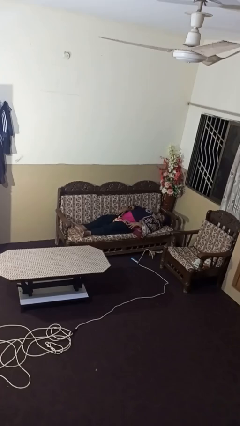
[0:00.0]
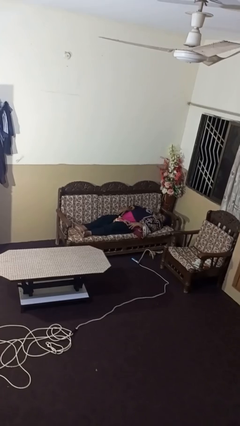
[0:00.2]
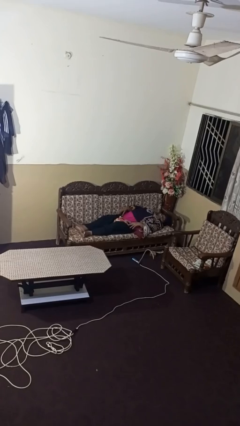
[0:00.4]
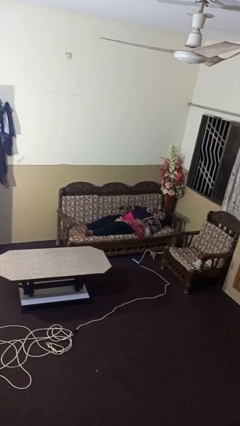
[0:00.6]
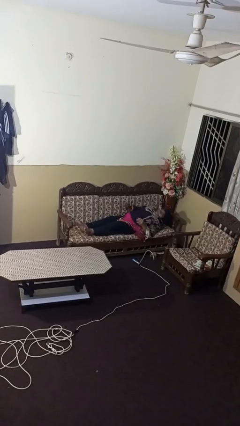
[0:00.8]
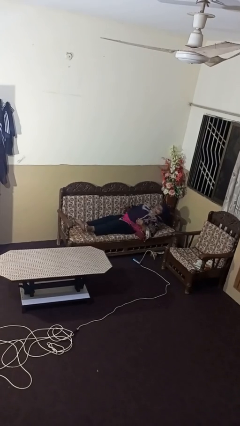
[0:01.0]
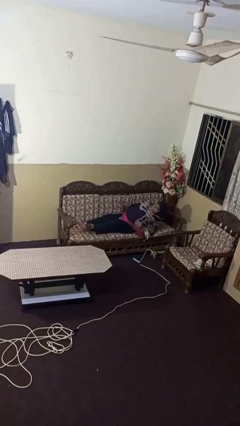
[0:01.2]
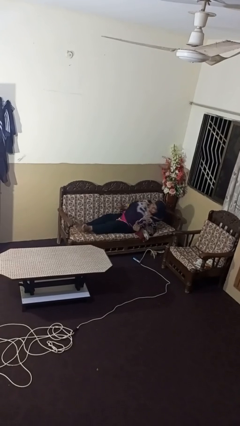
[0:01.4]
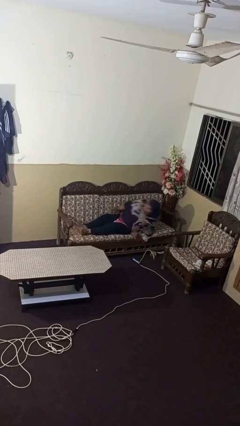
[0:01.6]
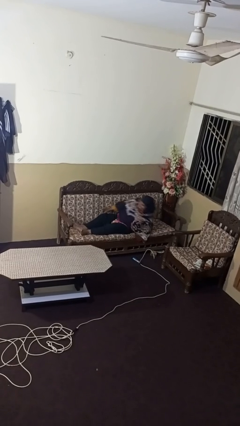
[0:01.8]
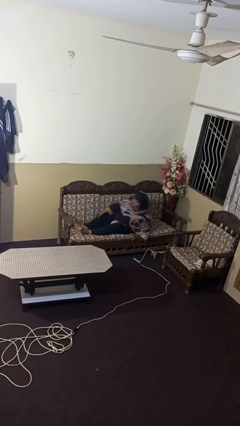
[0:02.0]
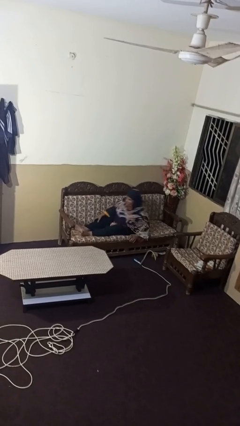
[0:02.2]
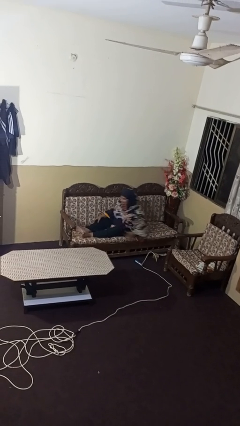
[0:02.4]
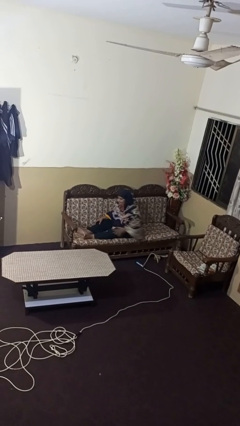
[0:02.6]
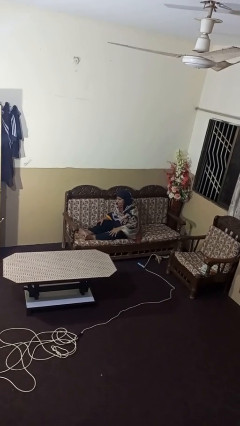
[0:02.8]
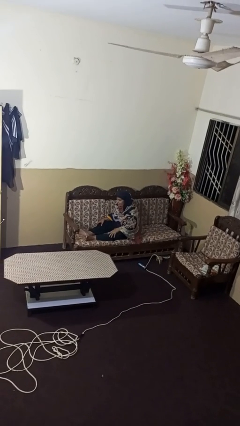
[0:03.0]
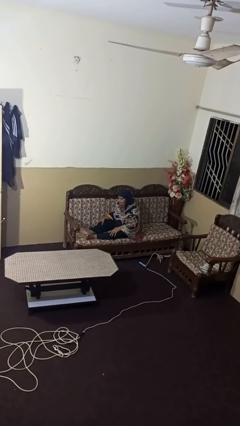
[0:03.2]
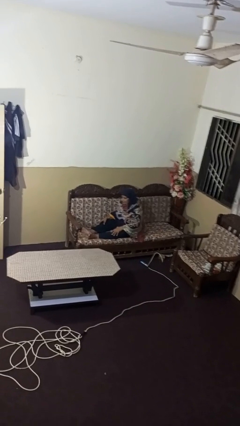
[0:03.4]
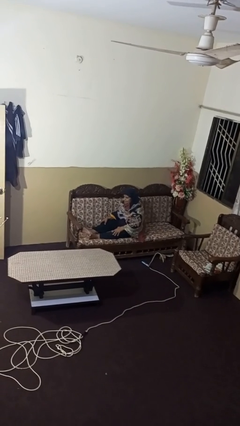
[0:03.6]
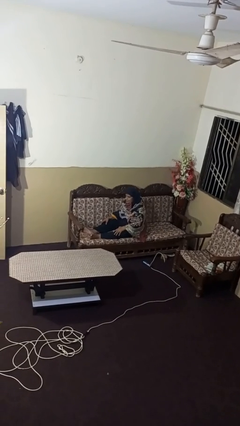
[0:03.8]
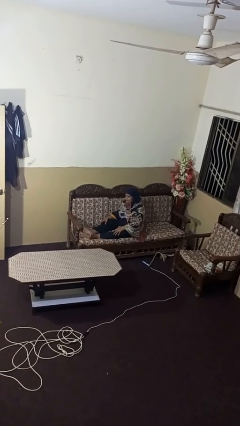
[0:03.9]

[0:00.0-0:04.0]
person stands up

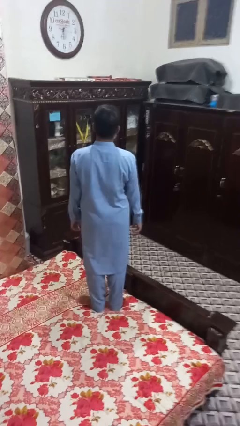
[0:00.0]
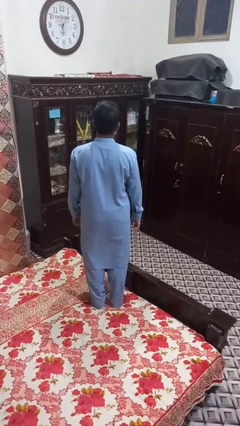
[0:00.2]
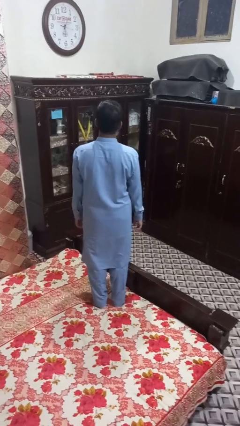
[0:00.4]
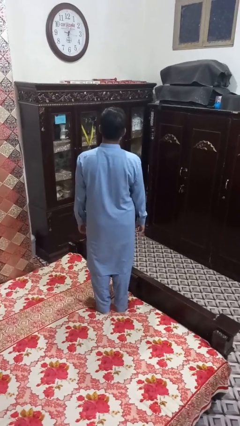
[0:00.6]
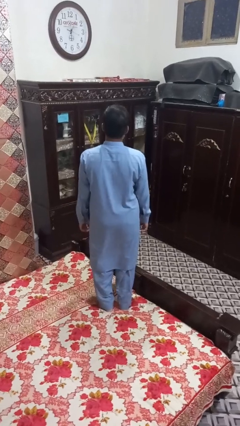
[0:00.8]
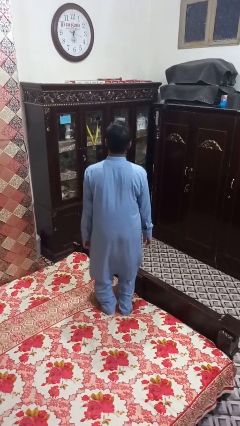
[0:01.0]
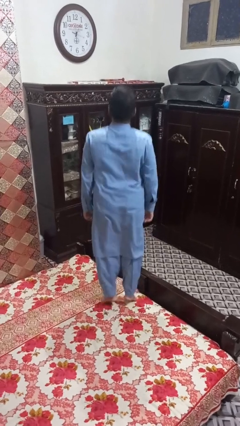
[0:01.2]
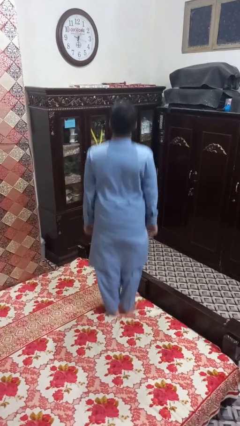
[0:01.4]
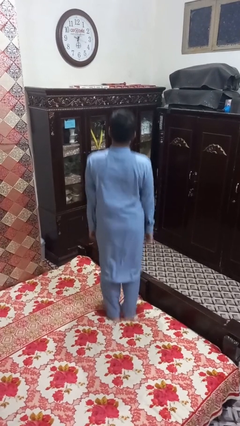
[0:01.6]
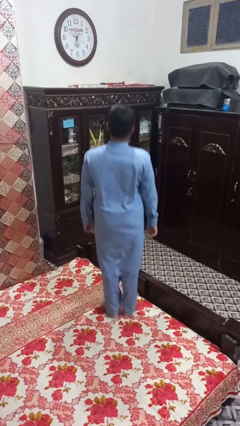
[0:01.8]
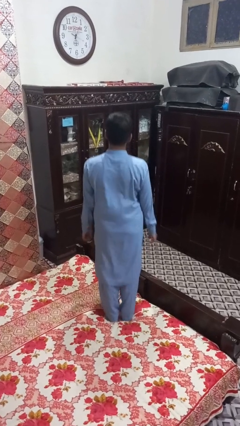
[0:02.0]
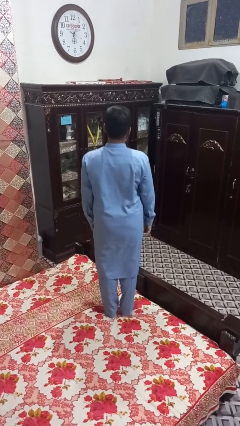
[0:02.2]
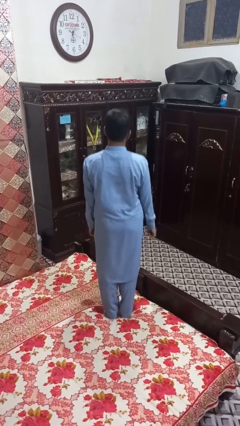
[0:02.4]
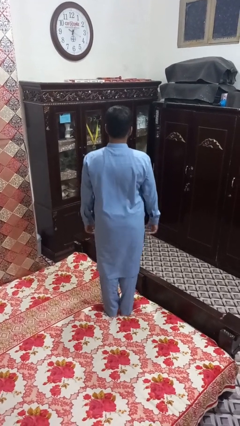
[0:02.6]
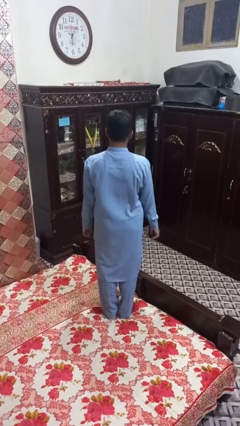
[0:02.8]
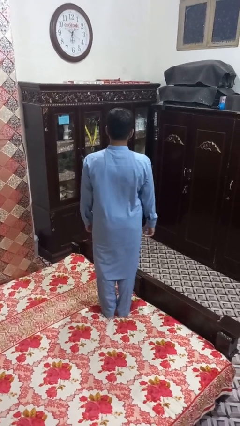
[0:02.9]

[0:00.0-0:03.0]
person jumps on bed

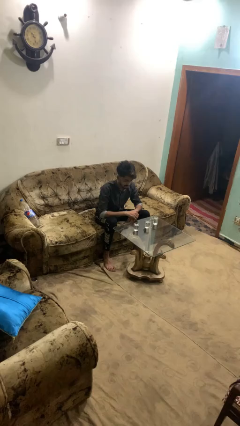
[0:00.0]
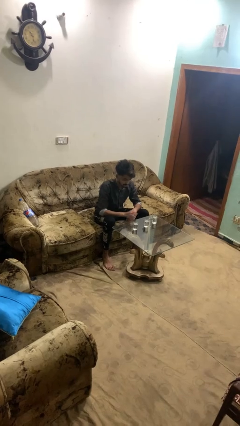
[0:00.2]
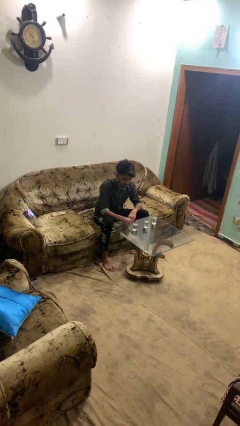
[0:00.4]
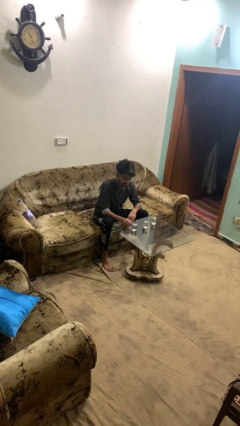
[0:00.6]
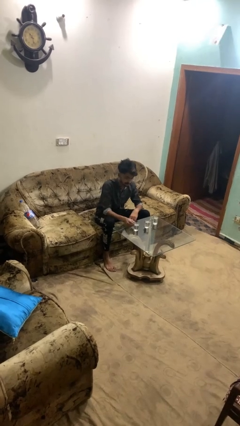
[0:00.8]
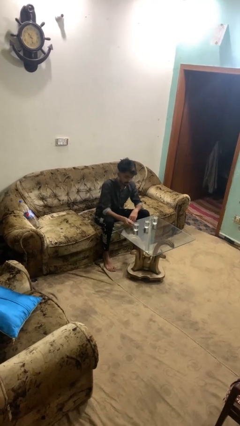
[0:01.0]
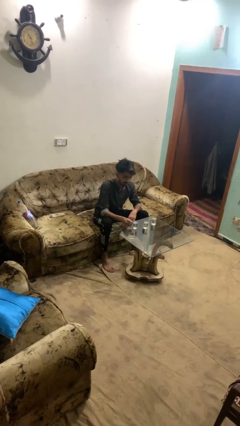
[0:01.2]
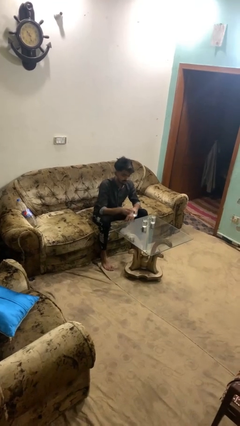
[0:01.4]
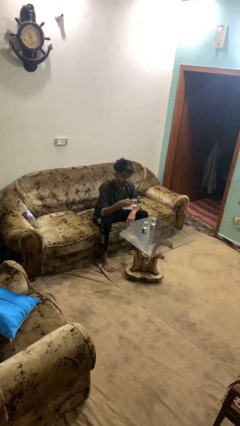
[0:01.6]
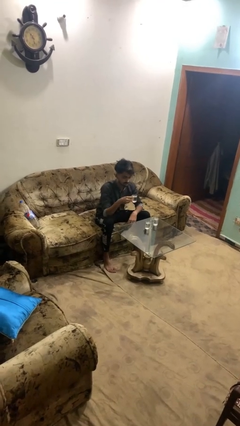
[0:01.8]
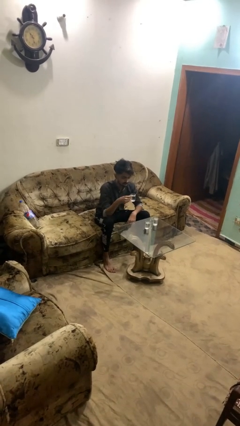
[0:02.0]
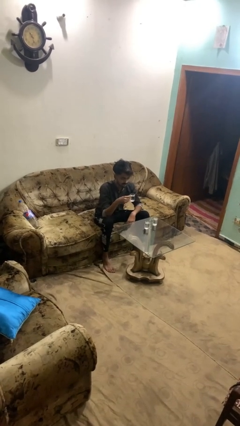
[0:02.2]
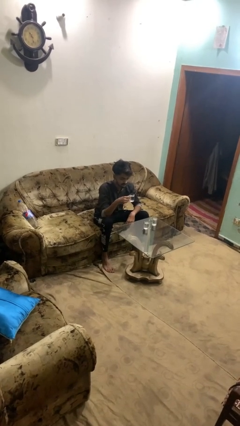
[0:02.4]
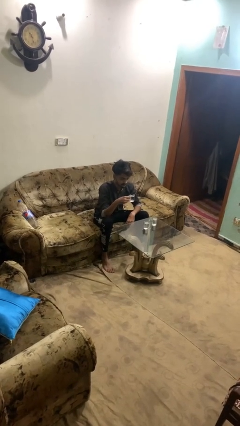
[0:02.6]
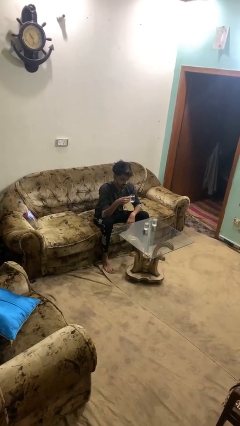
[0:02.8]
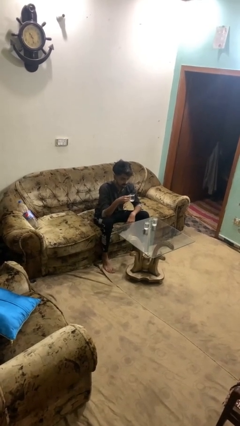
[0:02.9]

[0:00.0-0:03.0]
person picks up object from table

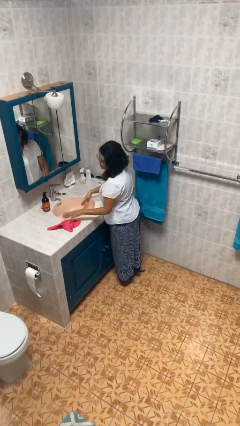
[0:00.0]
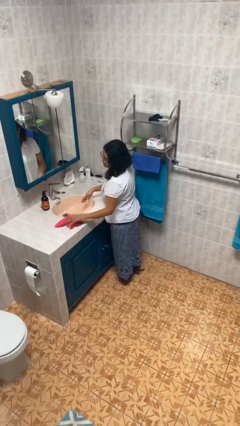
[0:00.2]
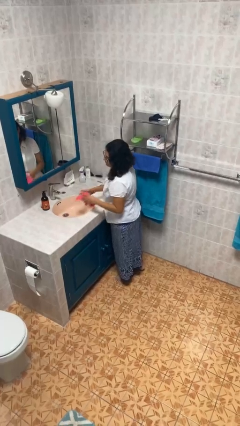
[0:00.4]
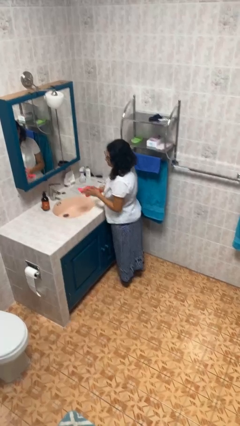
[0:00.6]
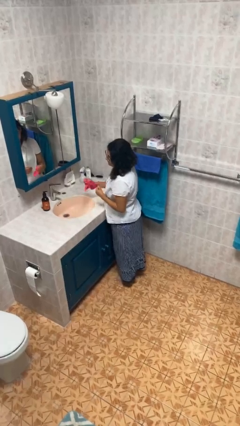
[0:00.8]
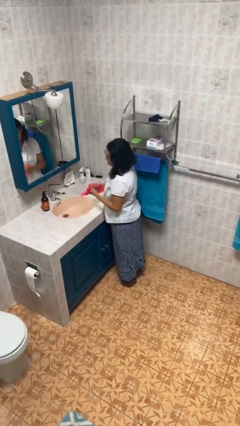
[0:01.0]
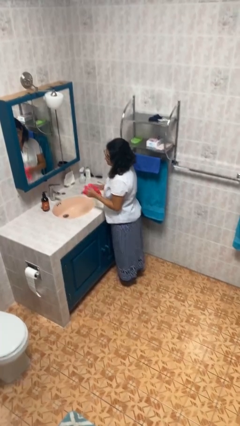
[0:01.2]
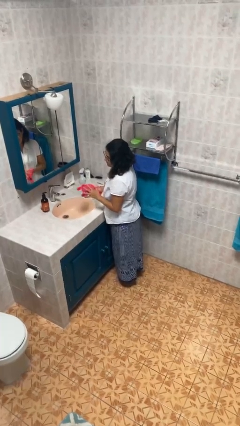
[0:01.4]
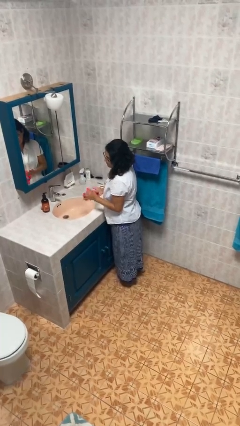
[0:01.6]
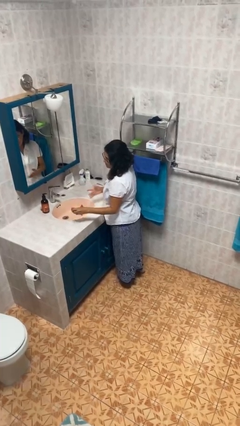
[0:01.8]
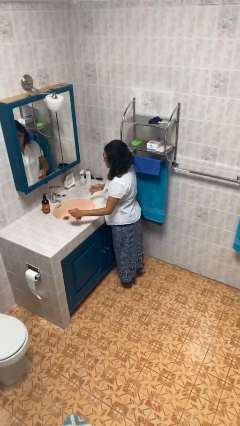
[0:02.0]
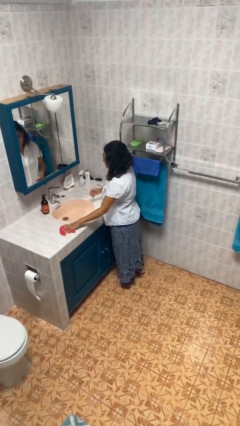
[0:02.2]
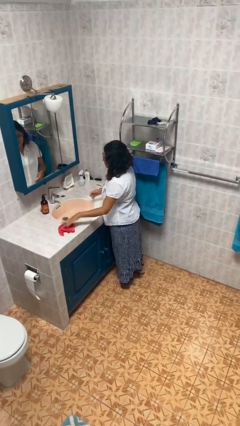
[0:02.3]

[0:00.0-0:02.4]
person dries hands with towel

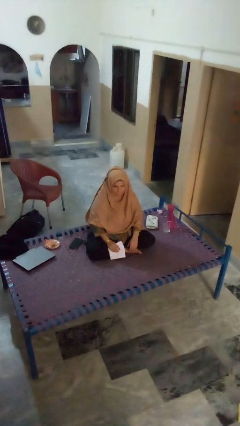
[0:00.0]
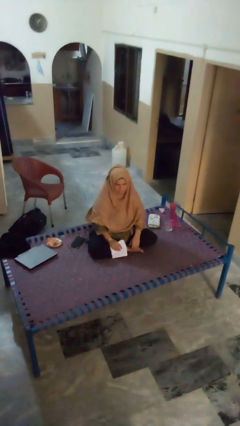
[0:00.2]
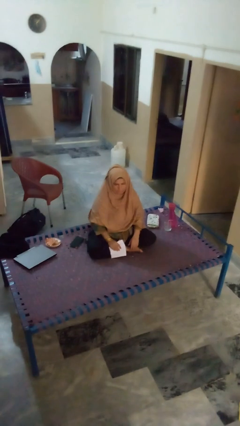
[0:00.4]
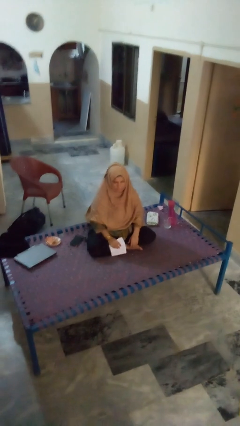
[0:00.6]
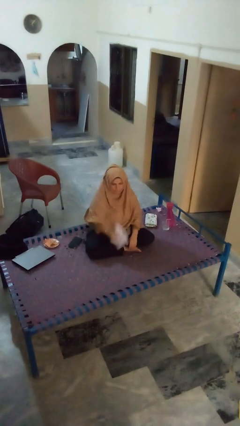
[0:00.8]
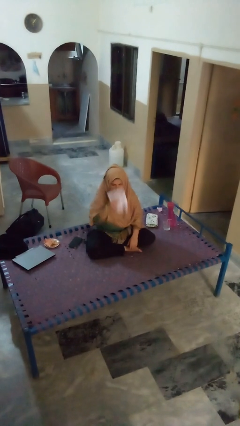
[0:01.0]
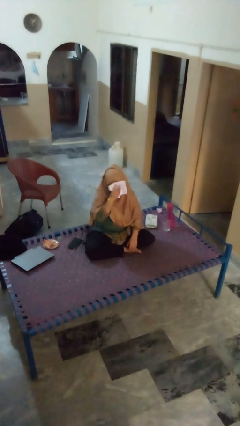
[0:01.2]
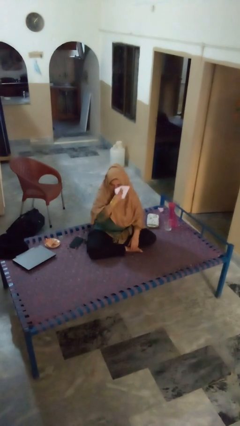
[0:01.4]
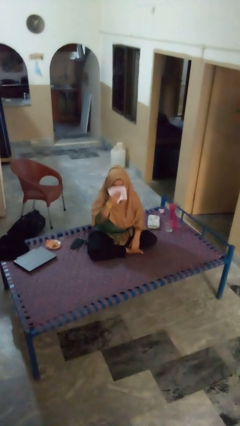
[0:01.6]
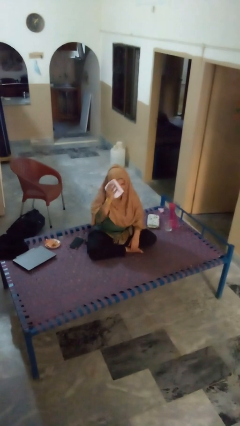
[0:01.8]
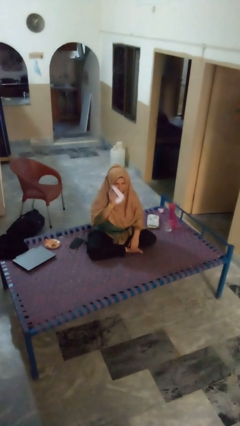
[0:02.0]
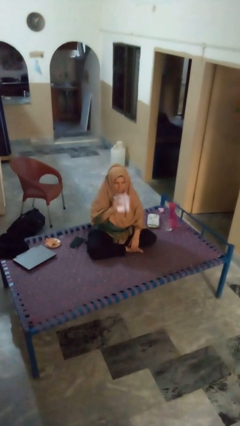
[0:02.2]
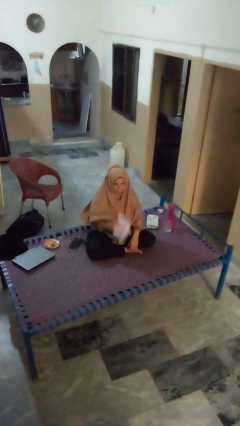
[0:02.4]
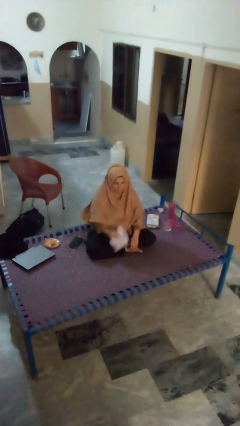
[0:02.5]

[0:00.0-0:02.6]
person wipes mouth with napkin

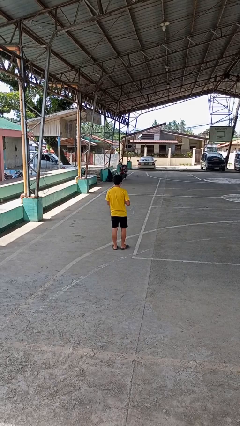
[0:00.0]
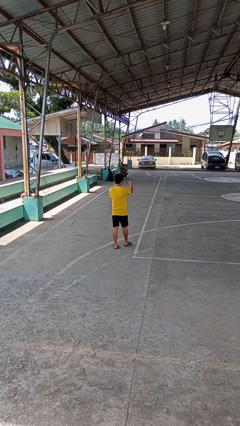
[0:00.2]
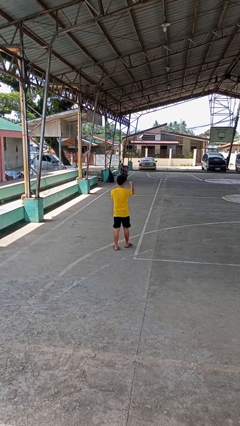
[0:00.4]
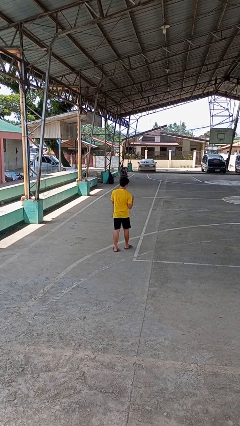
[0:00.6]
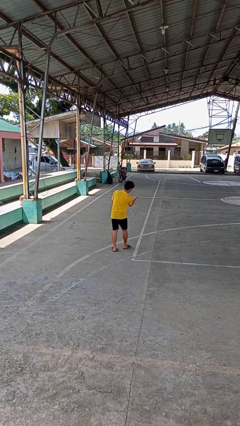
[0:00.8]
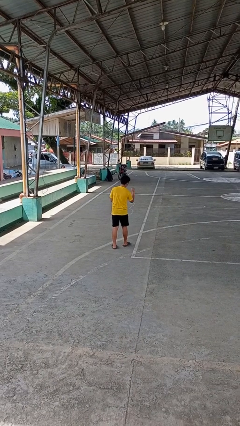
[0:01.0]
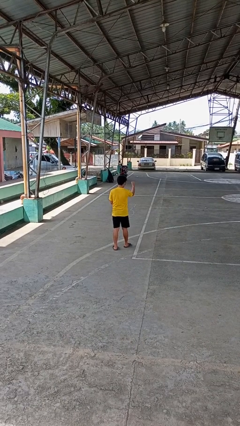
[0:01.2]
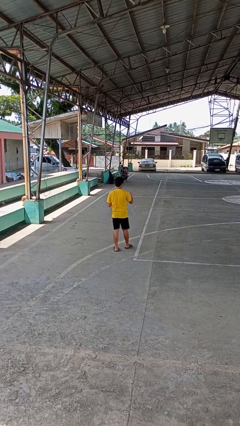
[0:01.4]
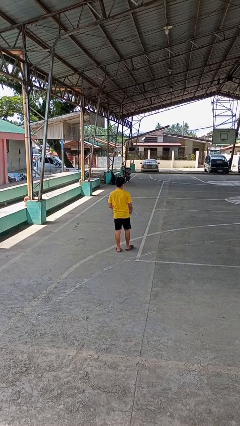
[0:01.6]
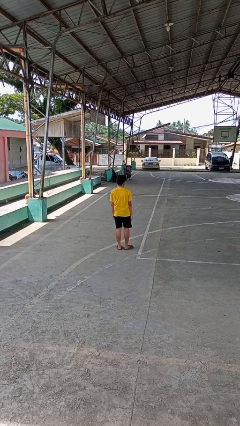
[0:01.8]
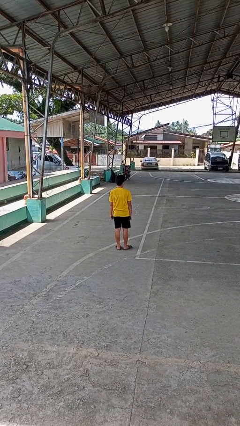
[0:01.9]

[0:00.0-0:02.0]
person punches

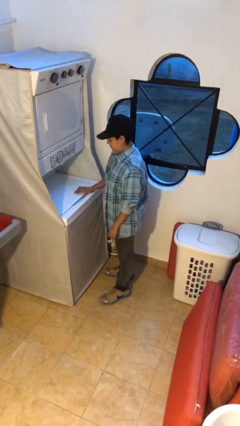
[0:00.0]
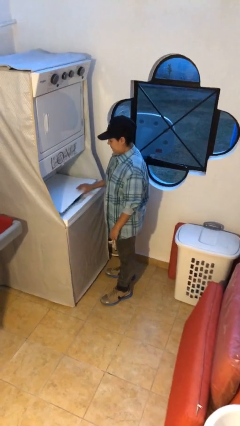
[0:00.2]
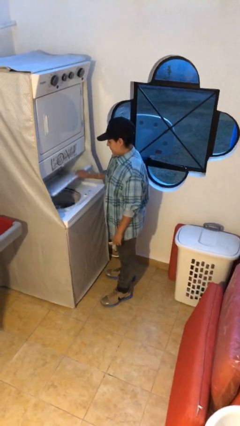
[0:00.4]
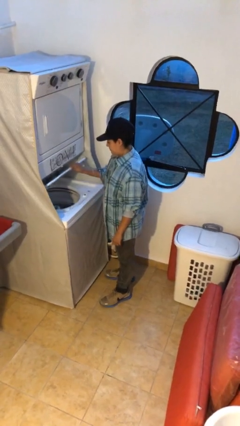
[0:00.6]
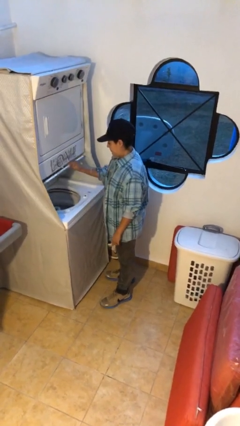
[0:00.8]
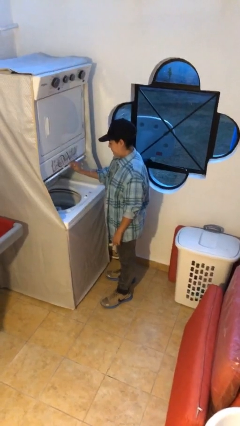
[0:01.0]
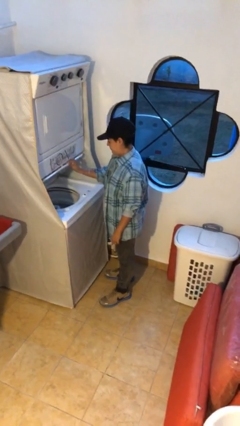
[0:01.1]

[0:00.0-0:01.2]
person opens clothes washer
